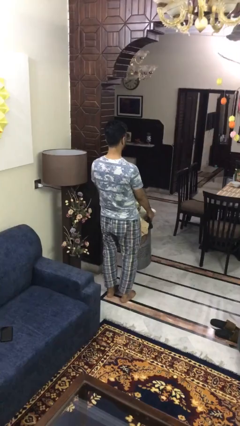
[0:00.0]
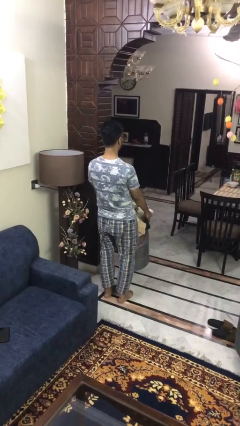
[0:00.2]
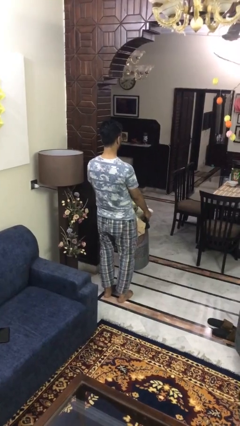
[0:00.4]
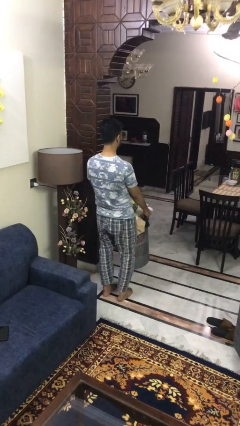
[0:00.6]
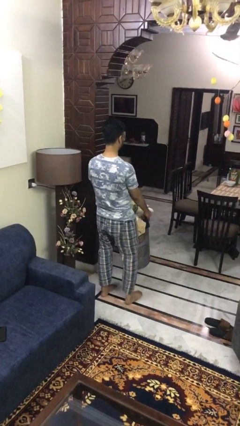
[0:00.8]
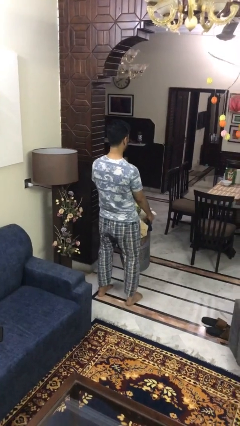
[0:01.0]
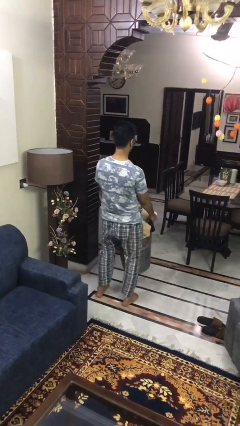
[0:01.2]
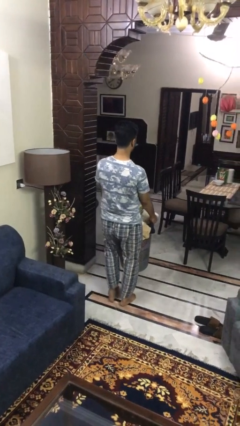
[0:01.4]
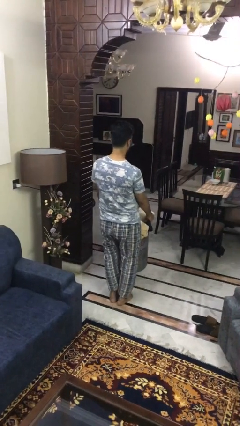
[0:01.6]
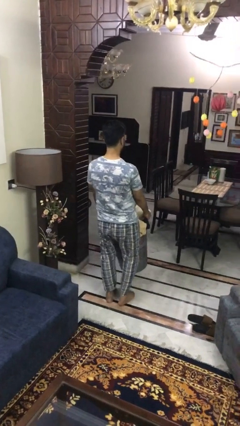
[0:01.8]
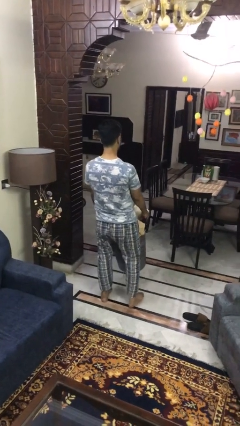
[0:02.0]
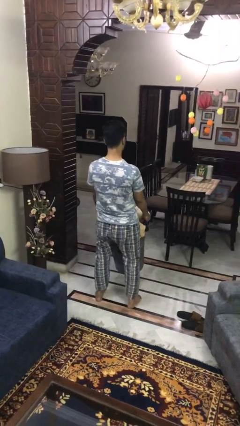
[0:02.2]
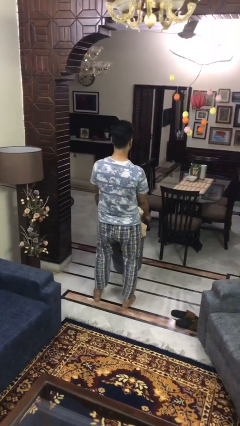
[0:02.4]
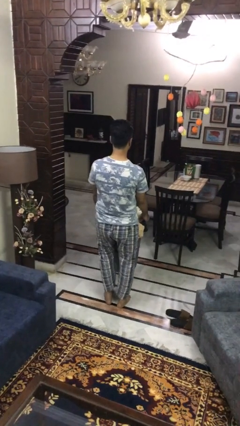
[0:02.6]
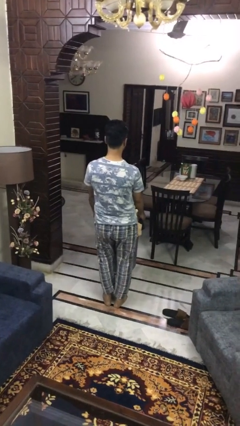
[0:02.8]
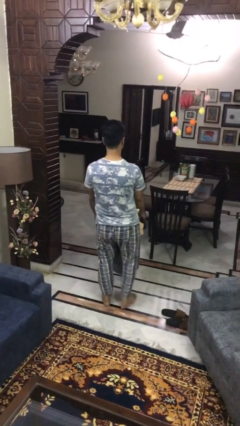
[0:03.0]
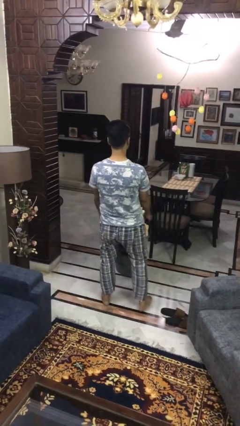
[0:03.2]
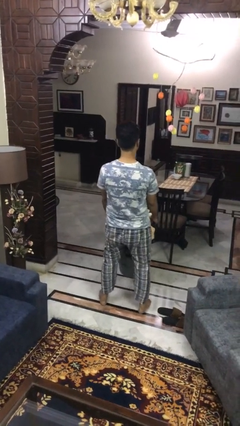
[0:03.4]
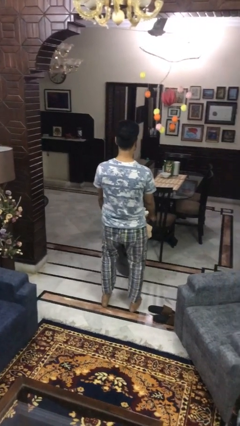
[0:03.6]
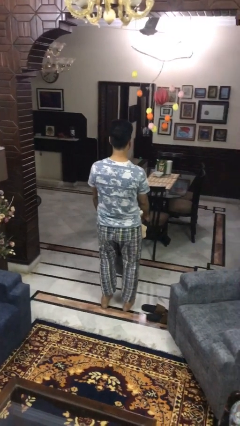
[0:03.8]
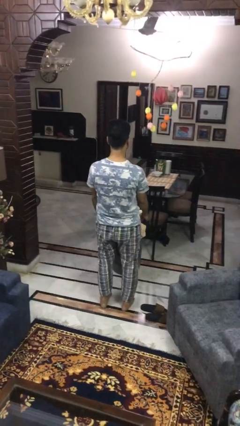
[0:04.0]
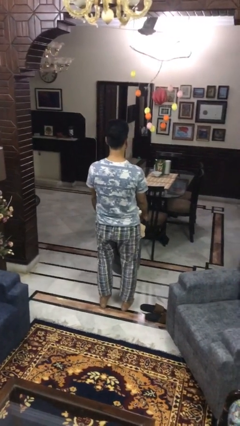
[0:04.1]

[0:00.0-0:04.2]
person carries laundry basket

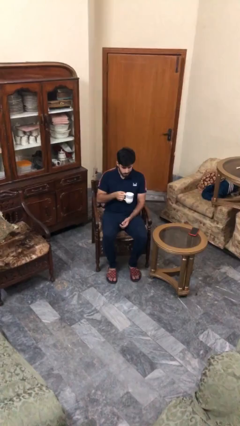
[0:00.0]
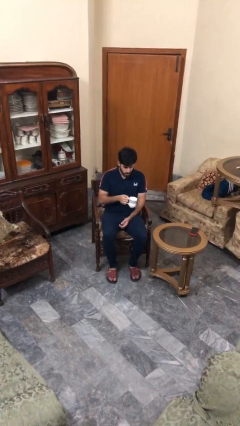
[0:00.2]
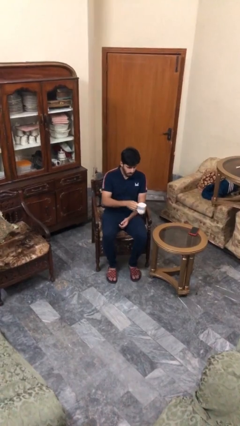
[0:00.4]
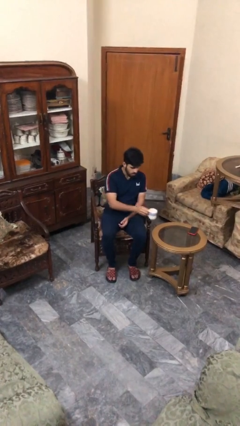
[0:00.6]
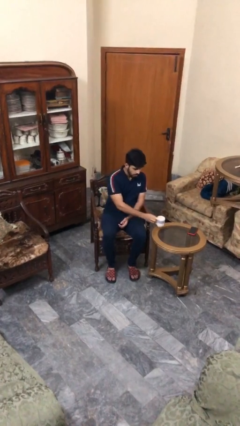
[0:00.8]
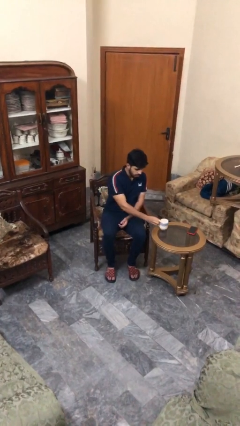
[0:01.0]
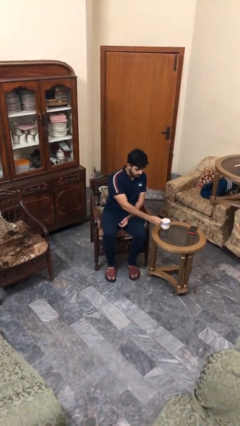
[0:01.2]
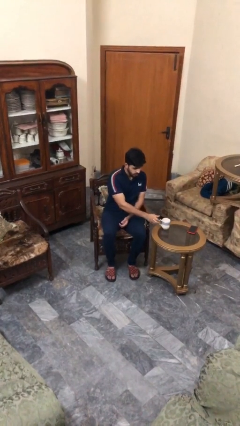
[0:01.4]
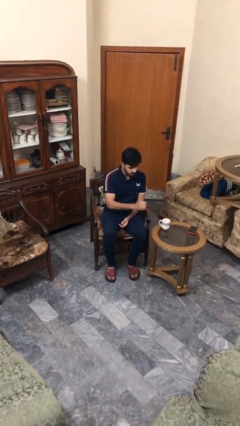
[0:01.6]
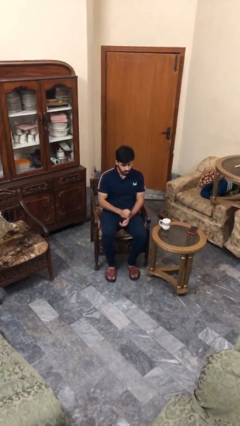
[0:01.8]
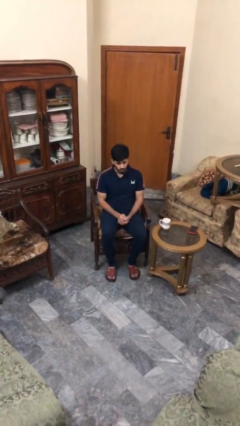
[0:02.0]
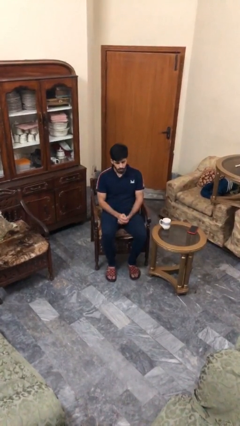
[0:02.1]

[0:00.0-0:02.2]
person puts down object on table

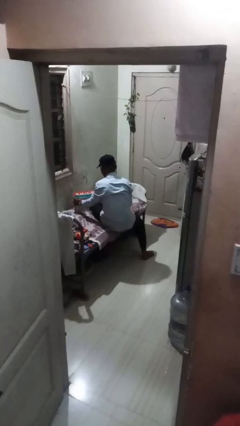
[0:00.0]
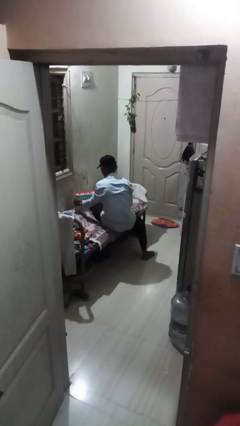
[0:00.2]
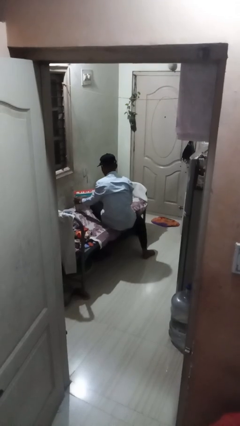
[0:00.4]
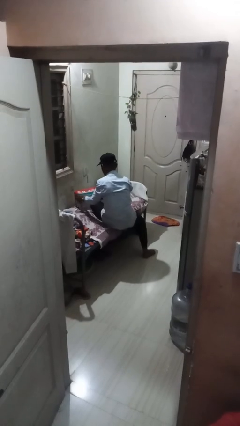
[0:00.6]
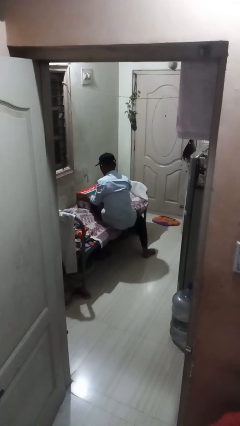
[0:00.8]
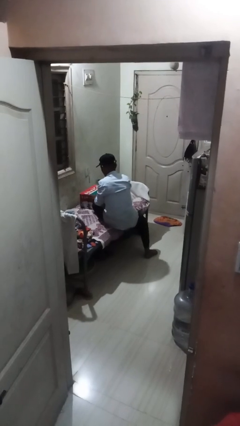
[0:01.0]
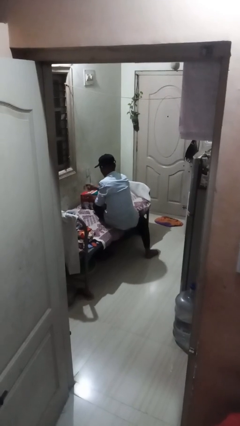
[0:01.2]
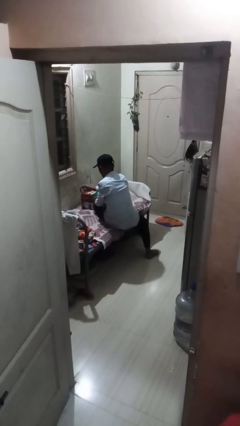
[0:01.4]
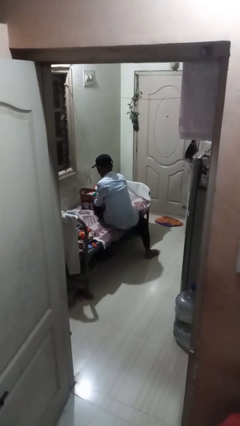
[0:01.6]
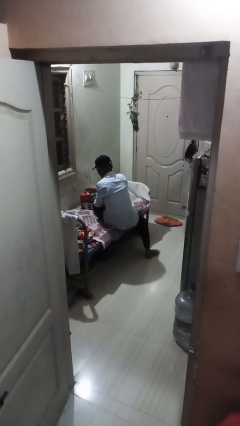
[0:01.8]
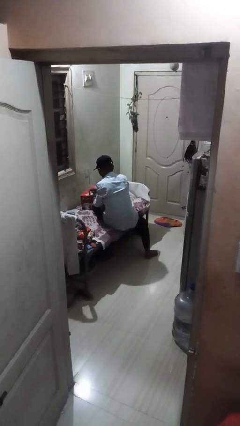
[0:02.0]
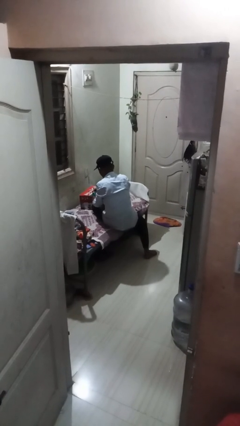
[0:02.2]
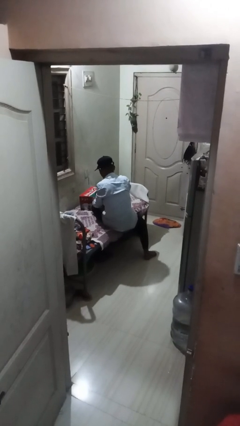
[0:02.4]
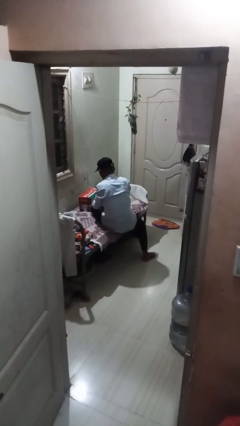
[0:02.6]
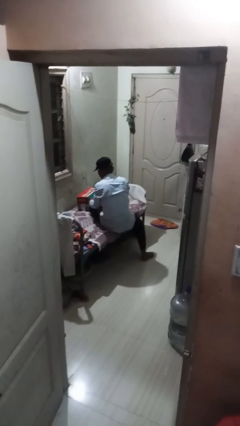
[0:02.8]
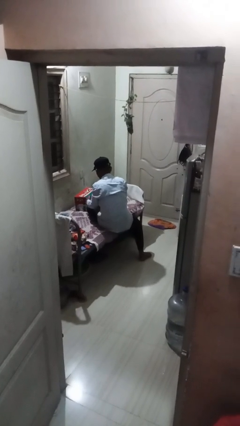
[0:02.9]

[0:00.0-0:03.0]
person wraps box

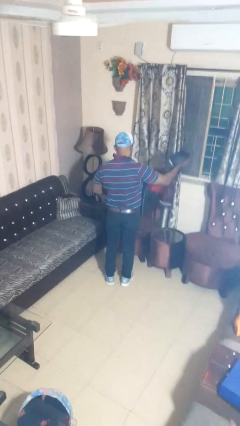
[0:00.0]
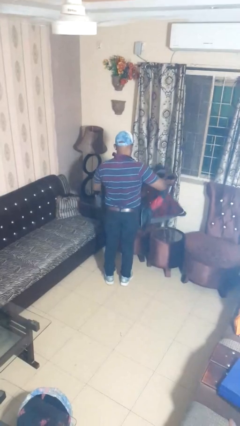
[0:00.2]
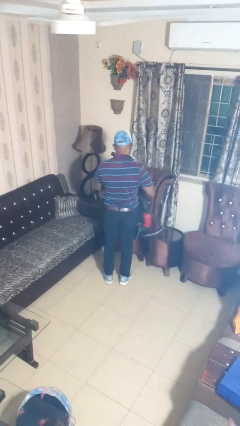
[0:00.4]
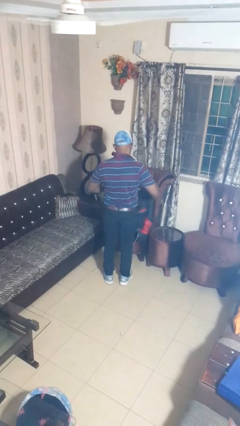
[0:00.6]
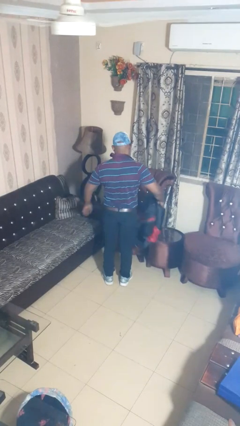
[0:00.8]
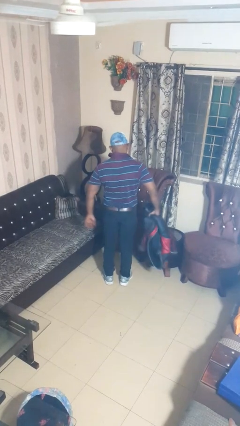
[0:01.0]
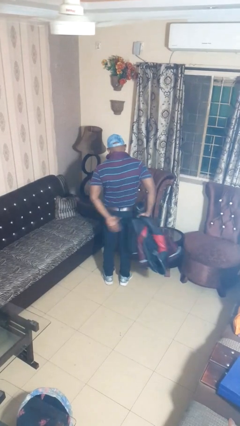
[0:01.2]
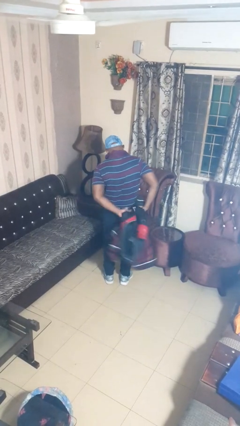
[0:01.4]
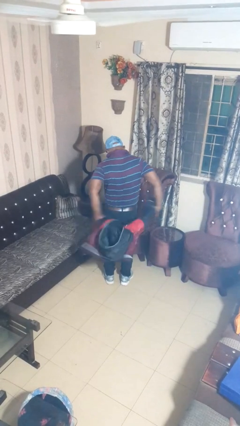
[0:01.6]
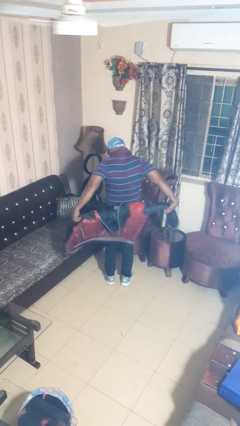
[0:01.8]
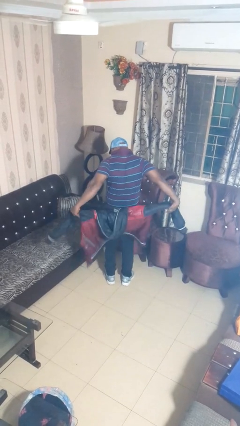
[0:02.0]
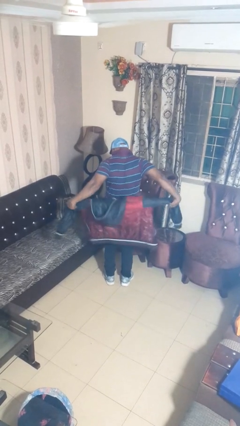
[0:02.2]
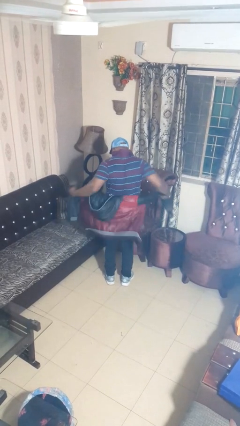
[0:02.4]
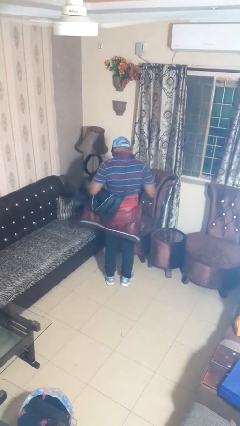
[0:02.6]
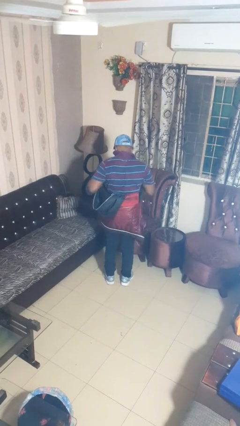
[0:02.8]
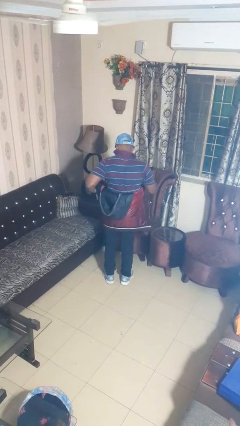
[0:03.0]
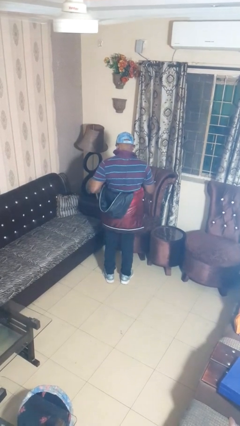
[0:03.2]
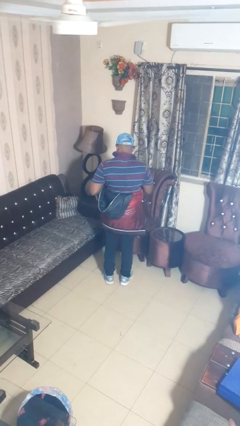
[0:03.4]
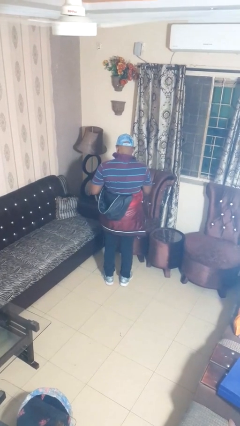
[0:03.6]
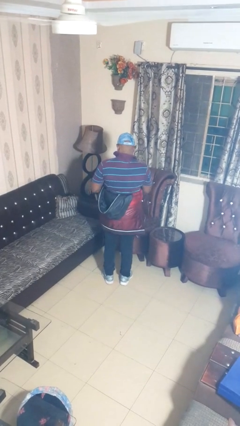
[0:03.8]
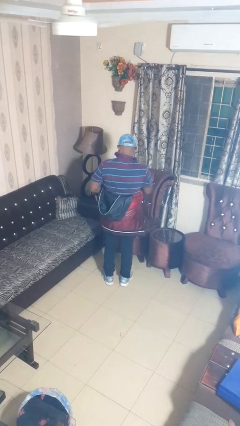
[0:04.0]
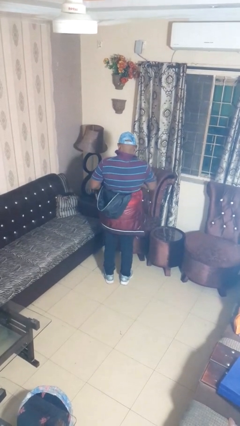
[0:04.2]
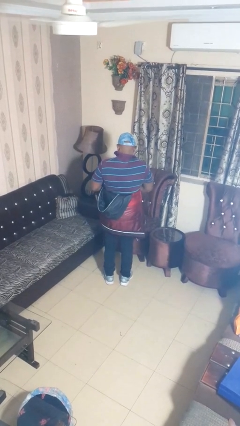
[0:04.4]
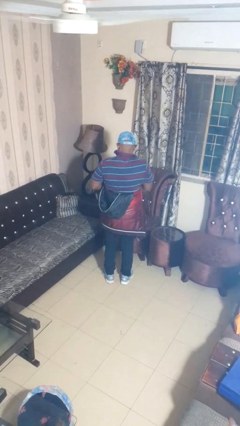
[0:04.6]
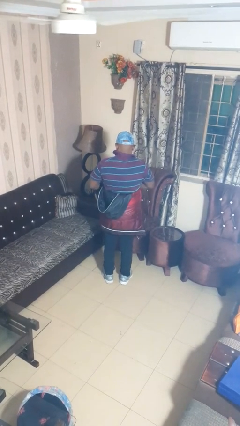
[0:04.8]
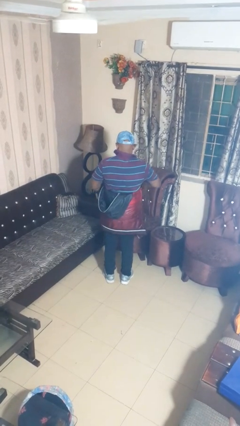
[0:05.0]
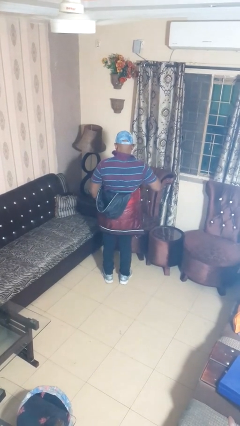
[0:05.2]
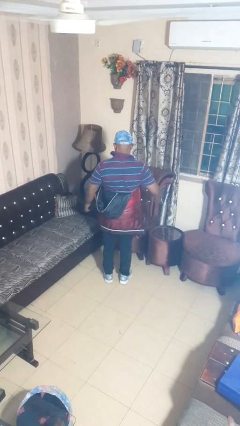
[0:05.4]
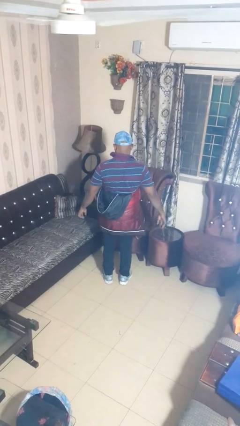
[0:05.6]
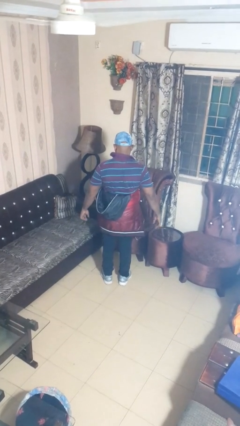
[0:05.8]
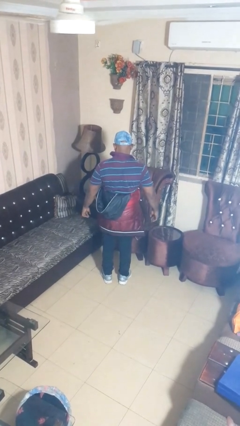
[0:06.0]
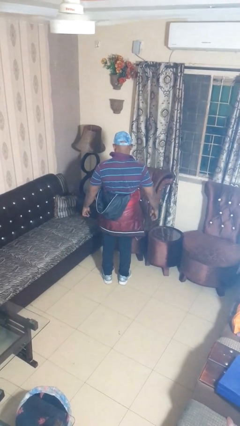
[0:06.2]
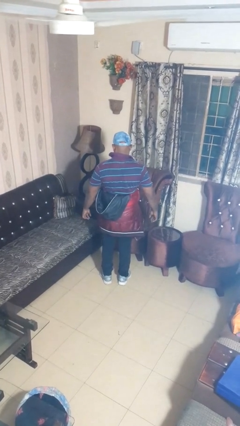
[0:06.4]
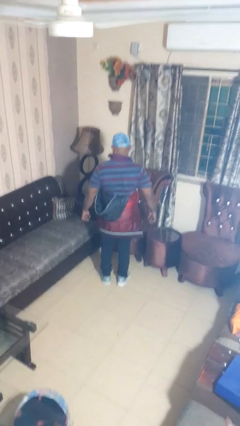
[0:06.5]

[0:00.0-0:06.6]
person ties jacket around waist

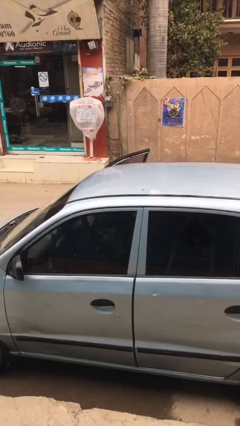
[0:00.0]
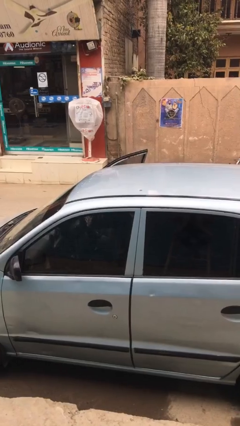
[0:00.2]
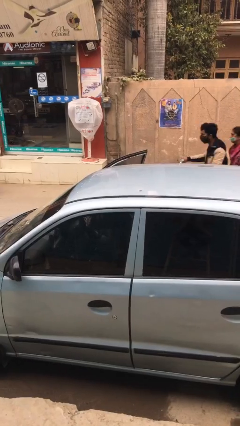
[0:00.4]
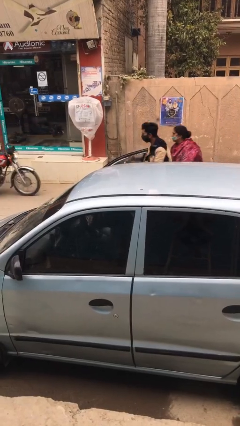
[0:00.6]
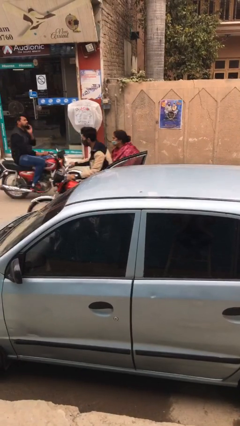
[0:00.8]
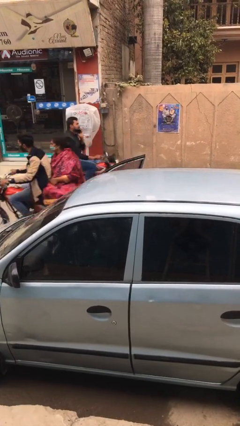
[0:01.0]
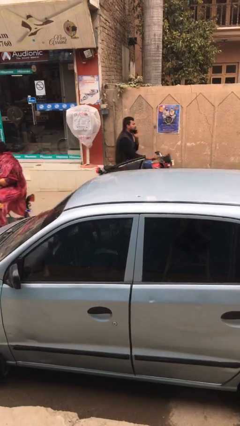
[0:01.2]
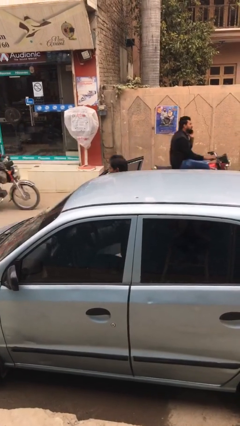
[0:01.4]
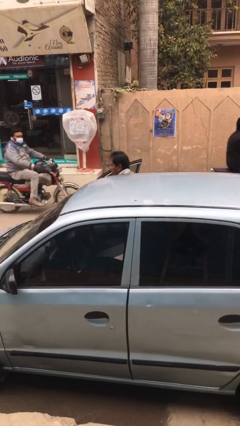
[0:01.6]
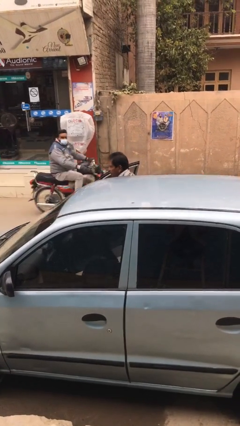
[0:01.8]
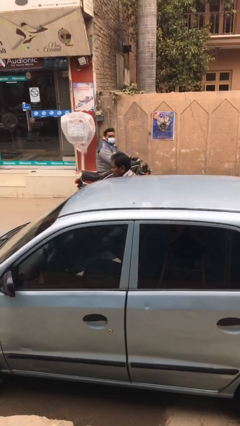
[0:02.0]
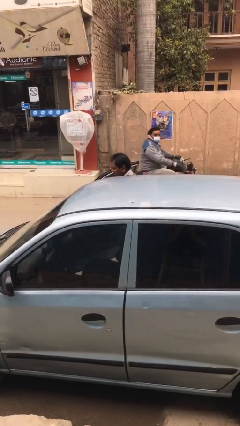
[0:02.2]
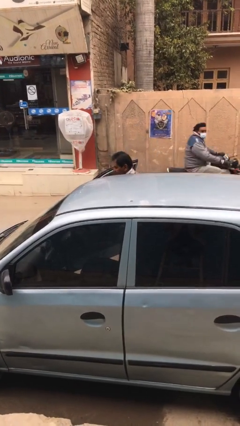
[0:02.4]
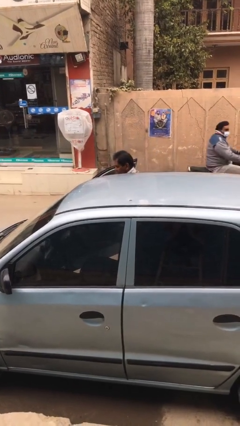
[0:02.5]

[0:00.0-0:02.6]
person exits car
